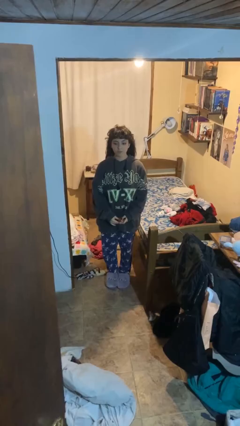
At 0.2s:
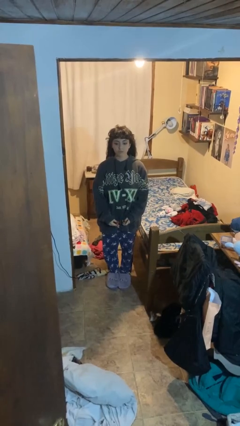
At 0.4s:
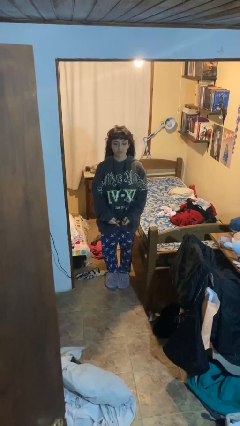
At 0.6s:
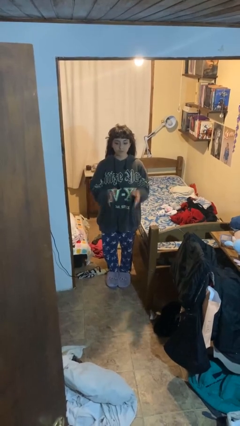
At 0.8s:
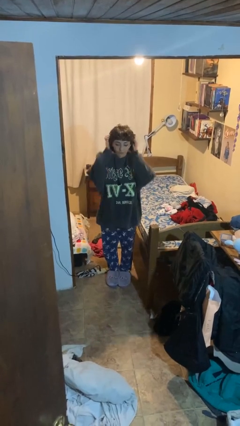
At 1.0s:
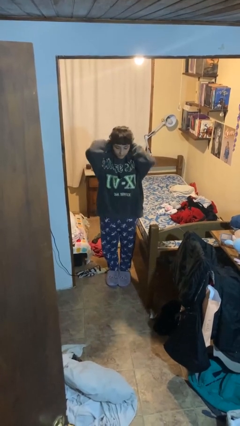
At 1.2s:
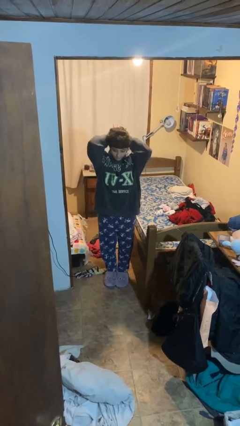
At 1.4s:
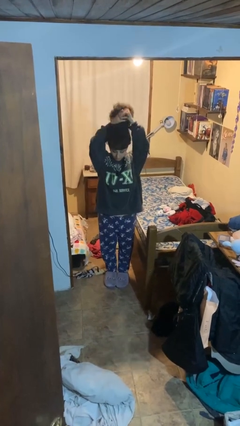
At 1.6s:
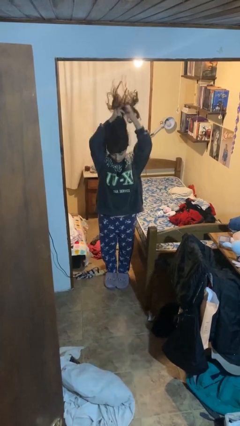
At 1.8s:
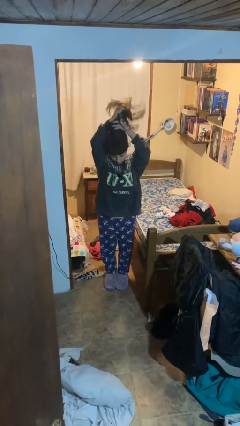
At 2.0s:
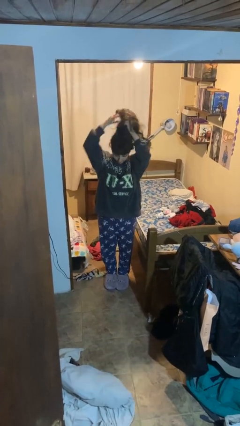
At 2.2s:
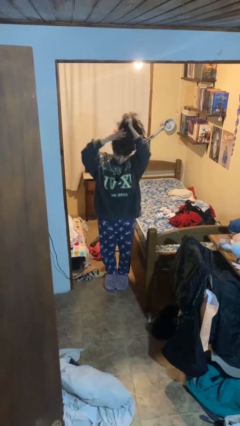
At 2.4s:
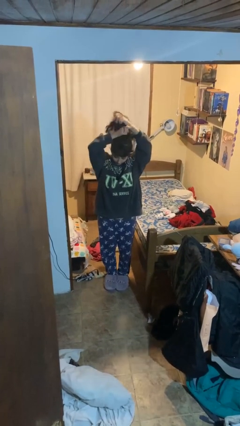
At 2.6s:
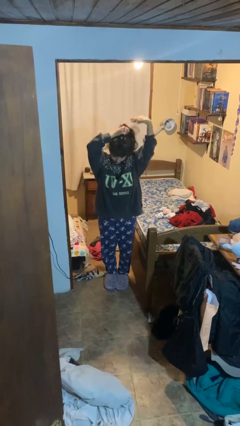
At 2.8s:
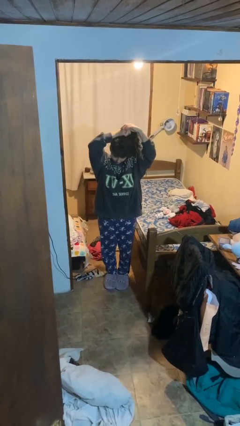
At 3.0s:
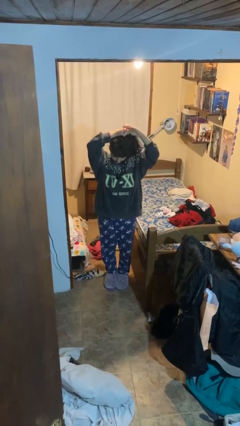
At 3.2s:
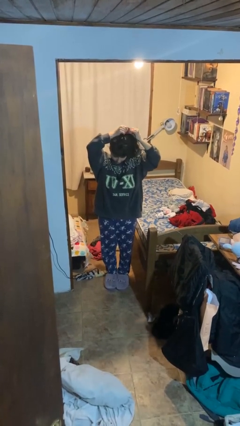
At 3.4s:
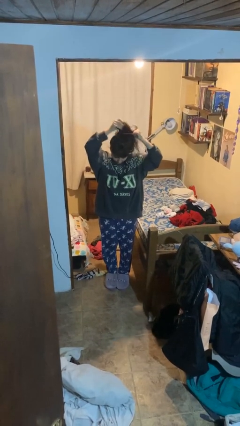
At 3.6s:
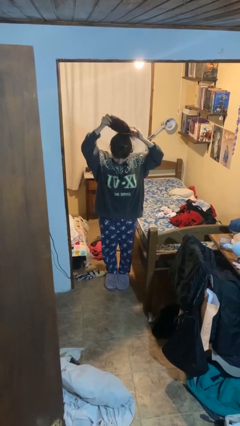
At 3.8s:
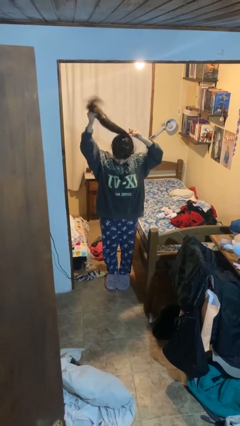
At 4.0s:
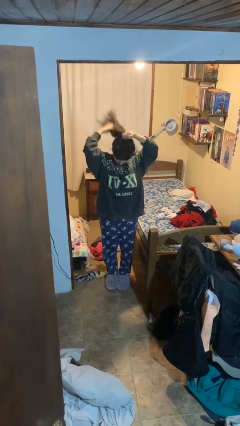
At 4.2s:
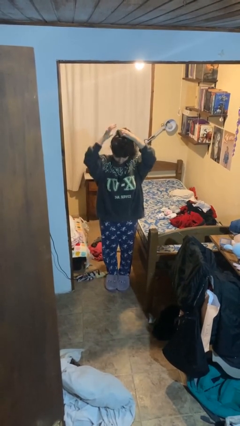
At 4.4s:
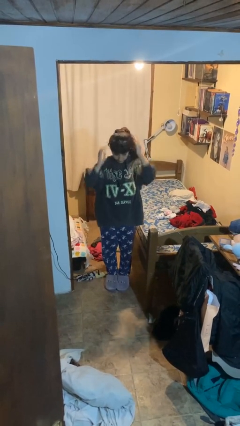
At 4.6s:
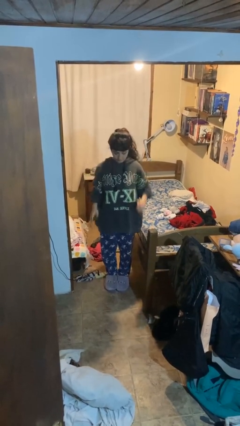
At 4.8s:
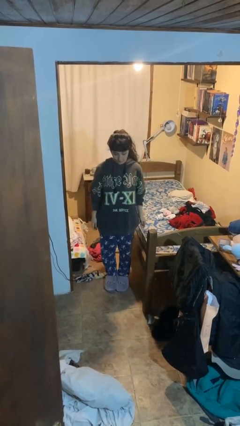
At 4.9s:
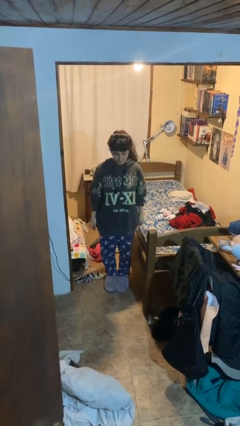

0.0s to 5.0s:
person puts hair in ponytail

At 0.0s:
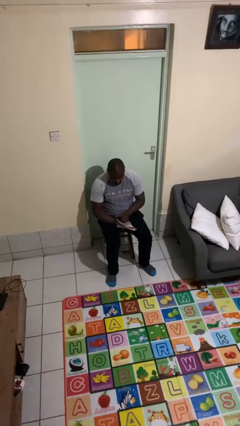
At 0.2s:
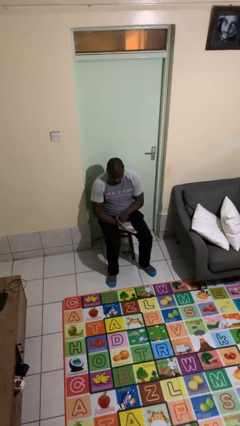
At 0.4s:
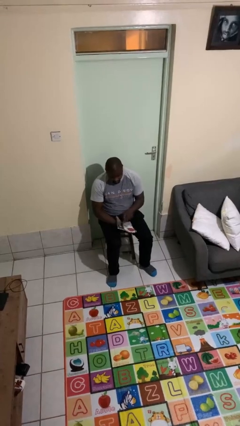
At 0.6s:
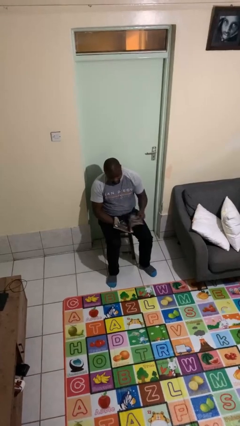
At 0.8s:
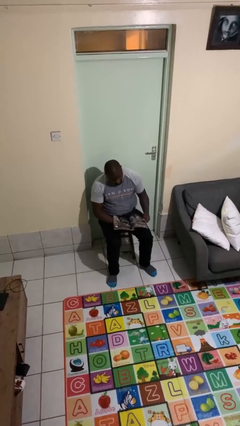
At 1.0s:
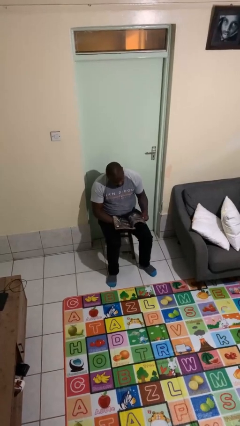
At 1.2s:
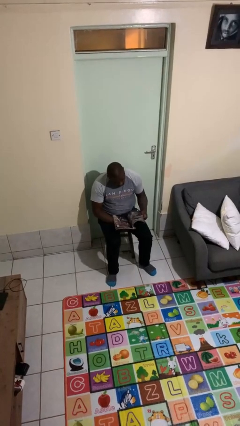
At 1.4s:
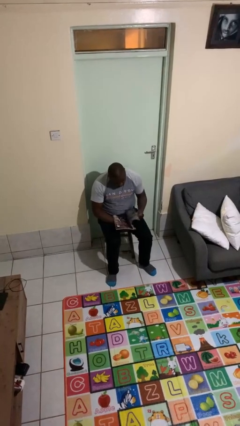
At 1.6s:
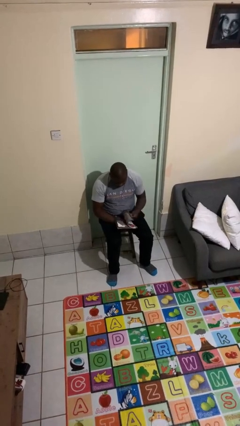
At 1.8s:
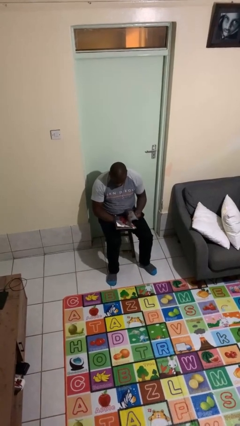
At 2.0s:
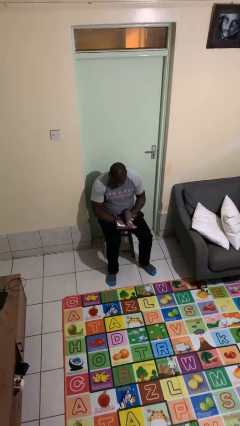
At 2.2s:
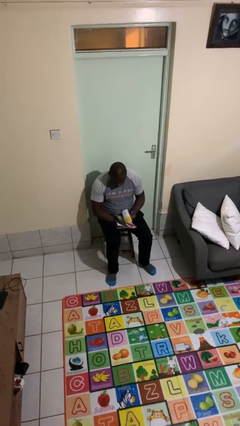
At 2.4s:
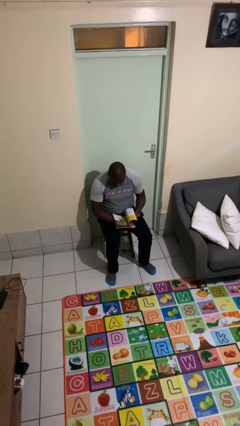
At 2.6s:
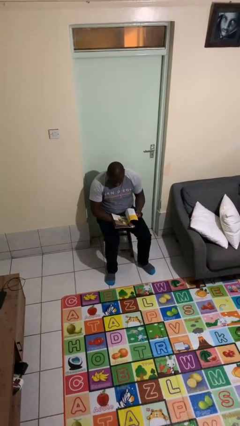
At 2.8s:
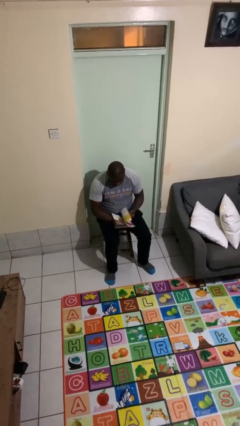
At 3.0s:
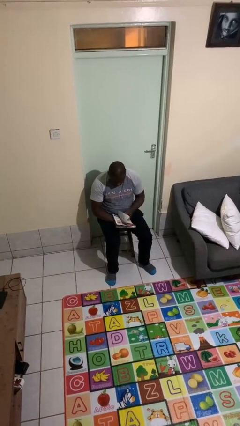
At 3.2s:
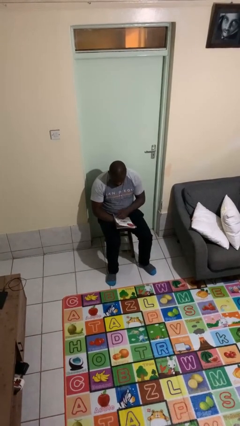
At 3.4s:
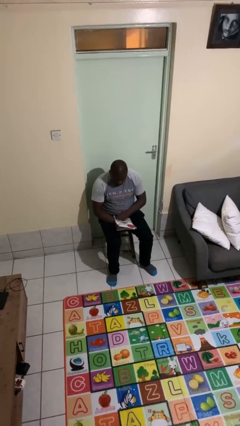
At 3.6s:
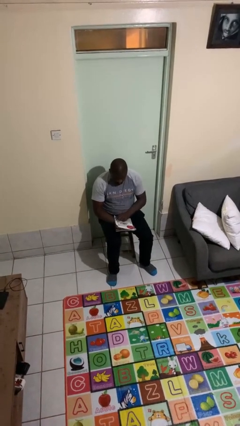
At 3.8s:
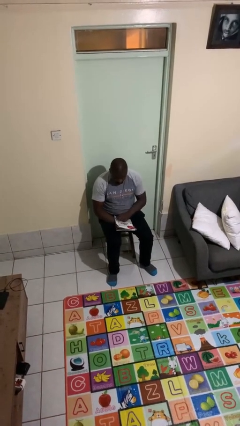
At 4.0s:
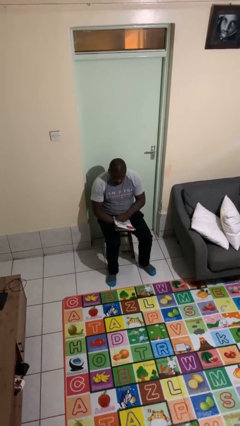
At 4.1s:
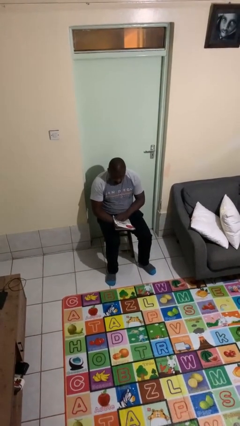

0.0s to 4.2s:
person reads magazine

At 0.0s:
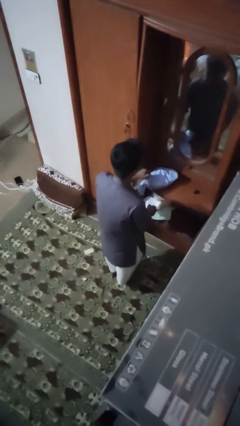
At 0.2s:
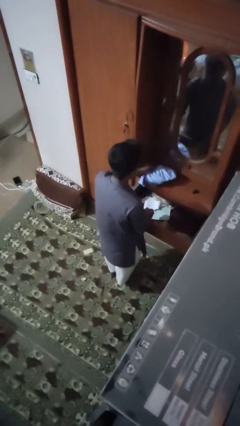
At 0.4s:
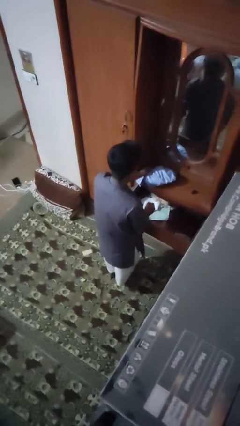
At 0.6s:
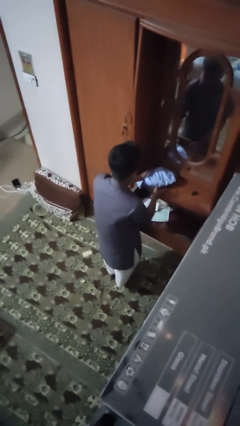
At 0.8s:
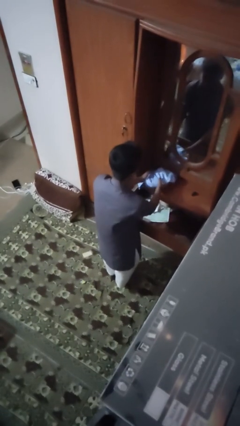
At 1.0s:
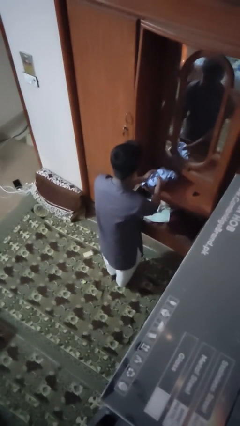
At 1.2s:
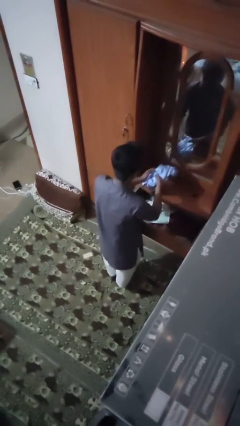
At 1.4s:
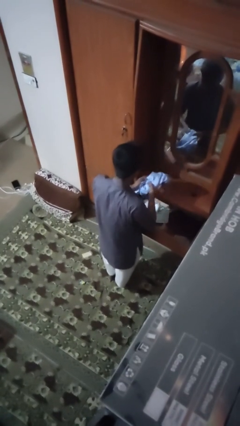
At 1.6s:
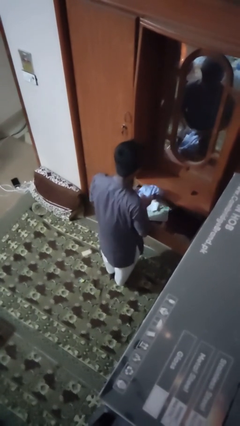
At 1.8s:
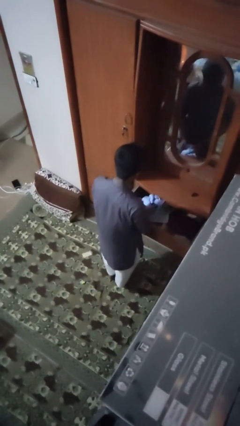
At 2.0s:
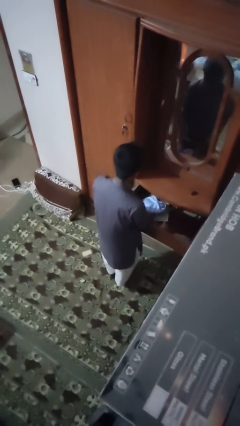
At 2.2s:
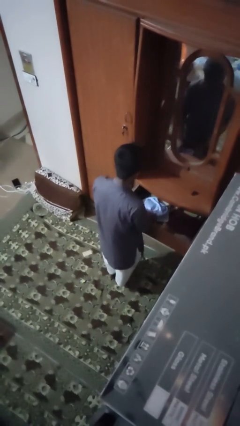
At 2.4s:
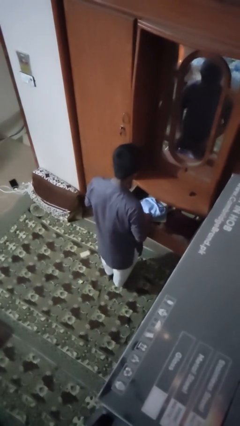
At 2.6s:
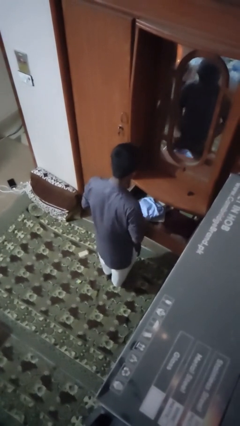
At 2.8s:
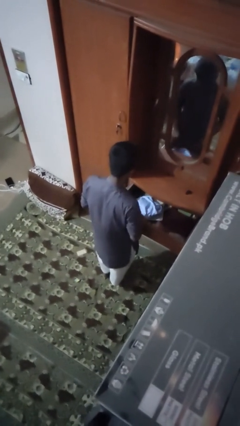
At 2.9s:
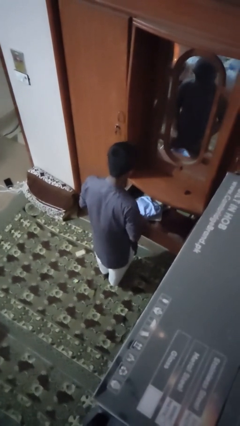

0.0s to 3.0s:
person puts clothes into dresser

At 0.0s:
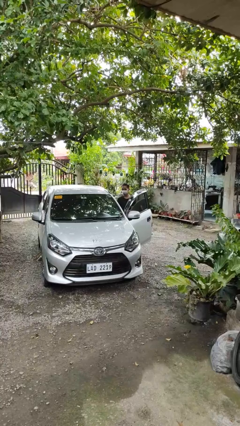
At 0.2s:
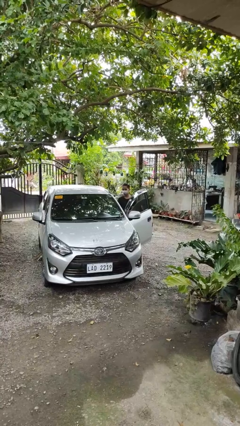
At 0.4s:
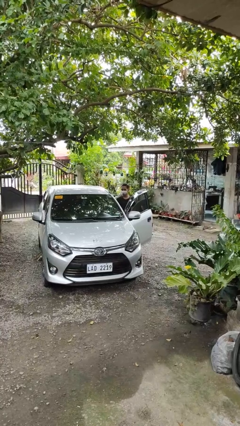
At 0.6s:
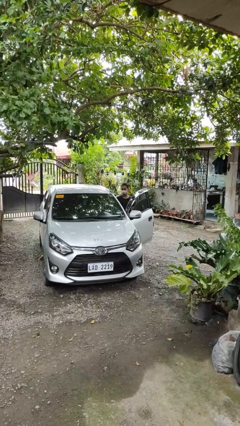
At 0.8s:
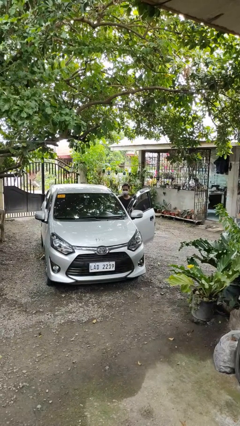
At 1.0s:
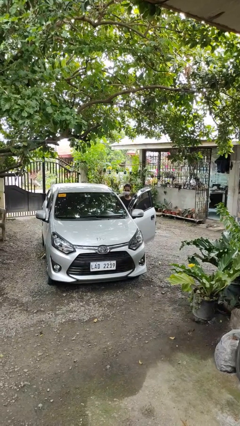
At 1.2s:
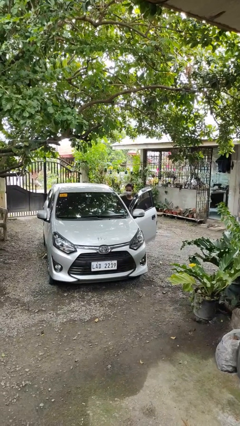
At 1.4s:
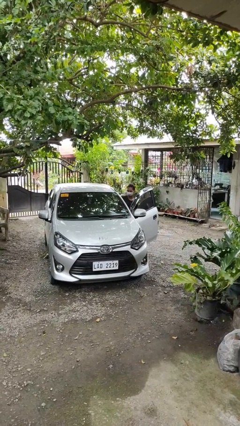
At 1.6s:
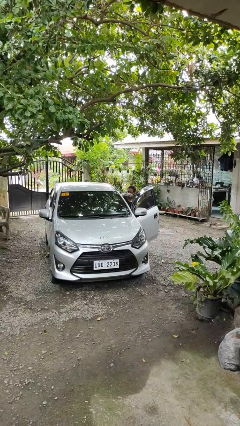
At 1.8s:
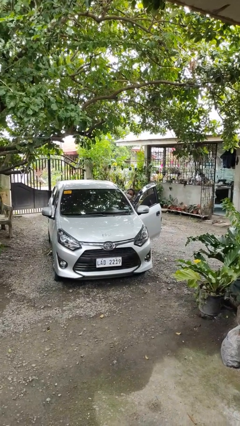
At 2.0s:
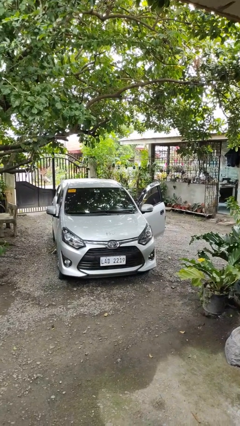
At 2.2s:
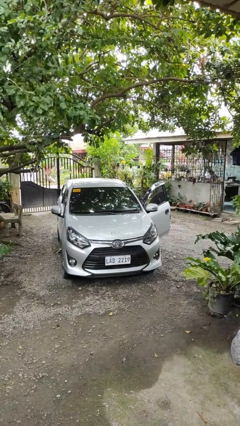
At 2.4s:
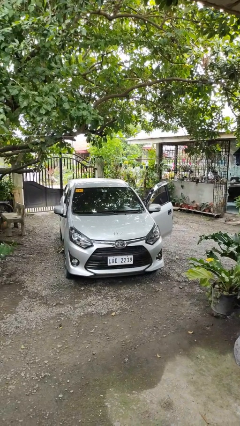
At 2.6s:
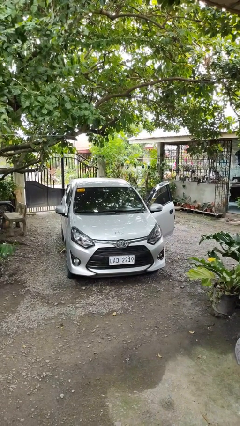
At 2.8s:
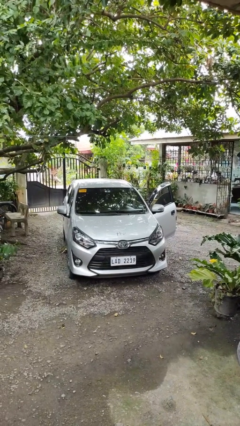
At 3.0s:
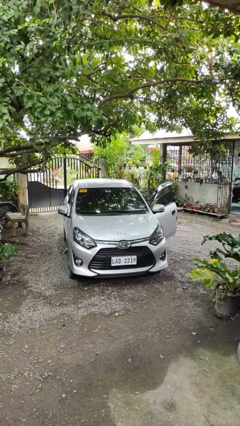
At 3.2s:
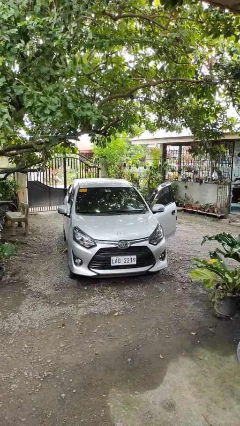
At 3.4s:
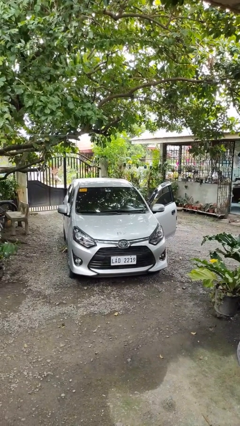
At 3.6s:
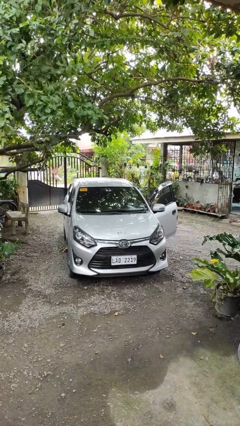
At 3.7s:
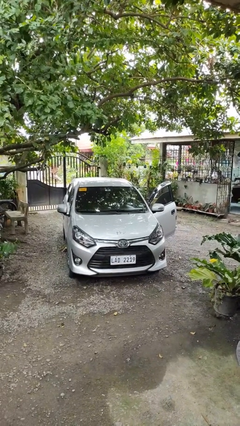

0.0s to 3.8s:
person enters car

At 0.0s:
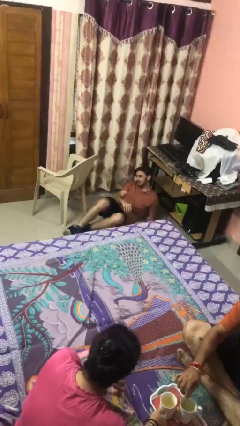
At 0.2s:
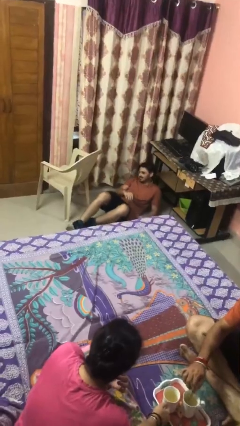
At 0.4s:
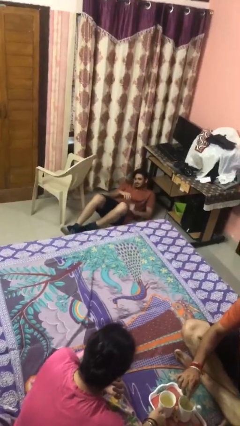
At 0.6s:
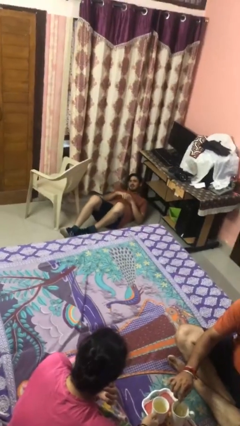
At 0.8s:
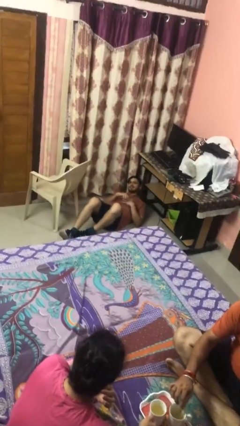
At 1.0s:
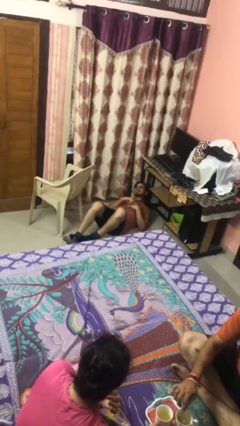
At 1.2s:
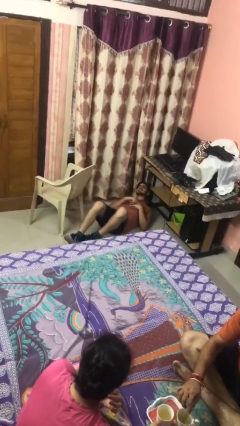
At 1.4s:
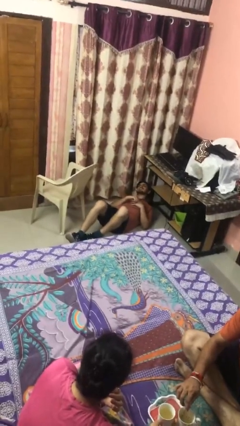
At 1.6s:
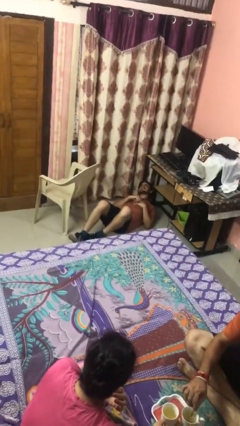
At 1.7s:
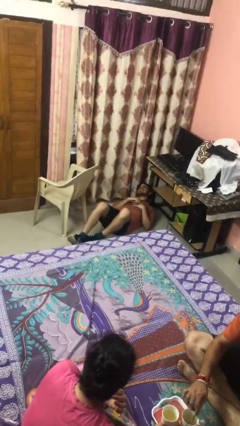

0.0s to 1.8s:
person lies down on floor
